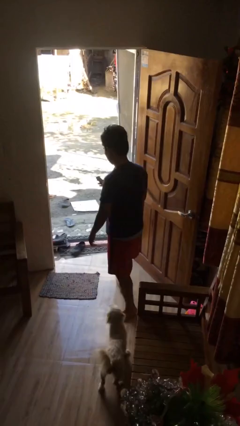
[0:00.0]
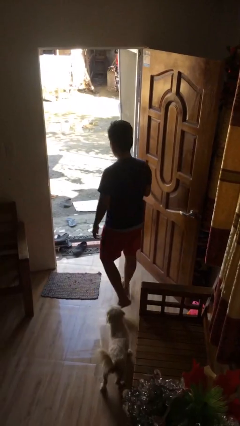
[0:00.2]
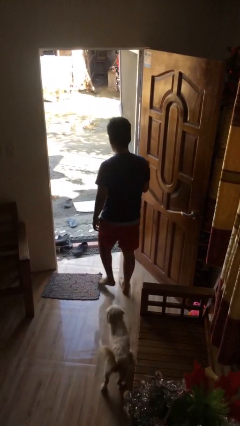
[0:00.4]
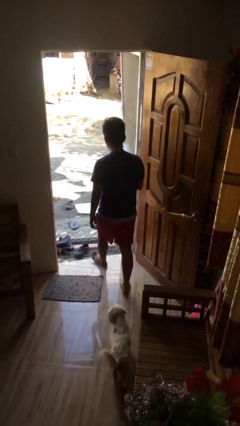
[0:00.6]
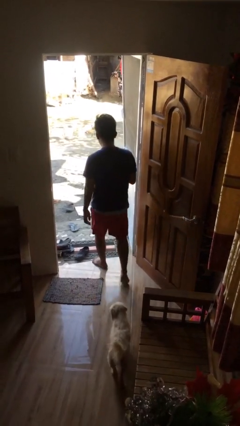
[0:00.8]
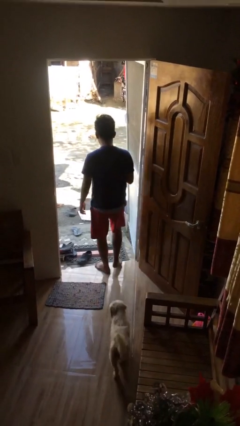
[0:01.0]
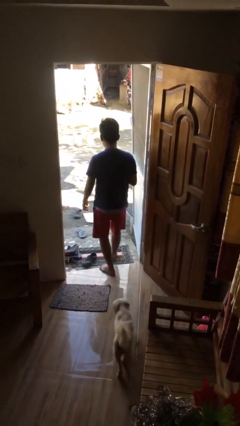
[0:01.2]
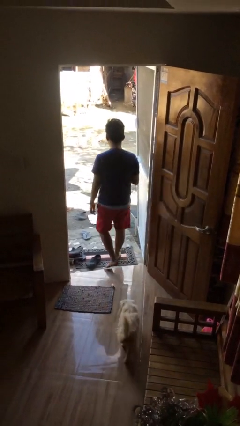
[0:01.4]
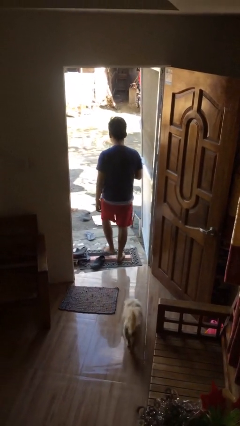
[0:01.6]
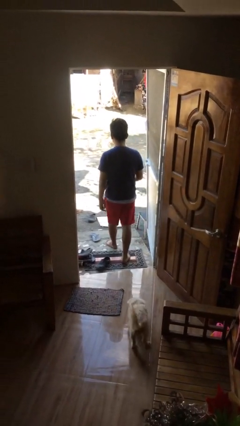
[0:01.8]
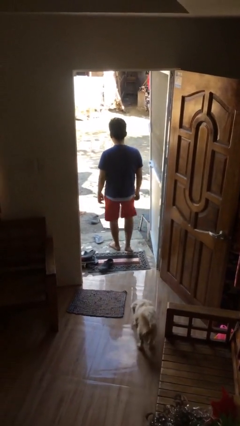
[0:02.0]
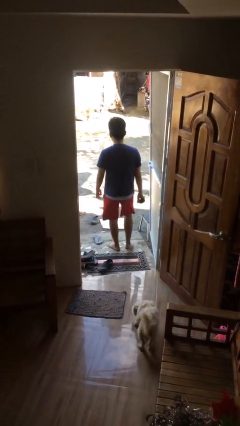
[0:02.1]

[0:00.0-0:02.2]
person exits scene through structure

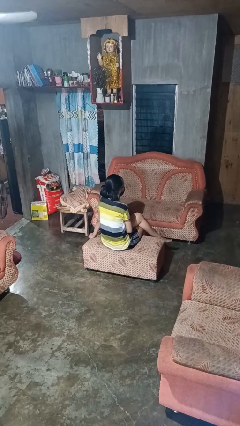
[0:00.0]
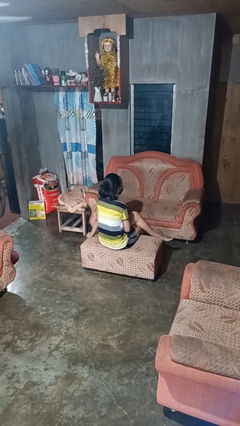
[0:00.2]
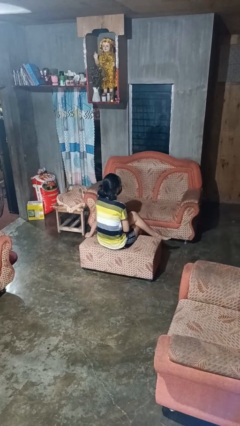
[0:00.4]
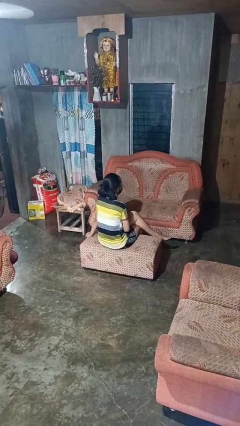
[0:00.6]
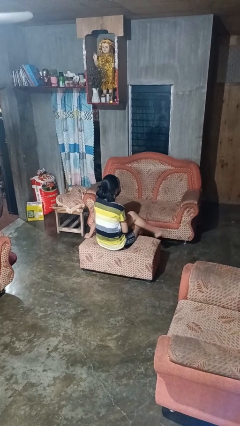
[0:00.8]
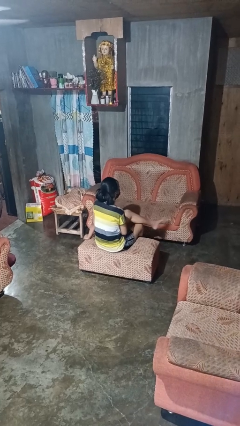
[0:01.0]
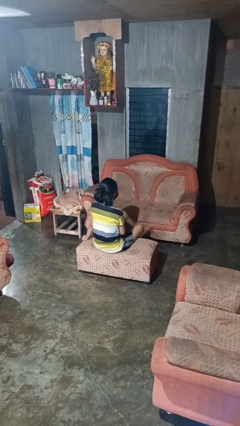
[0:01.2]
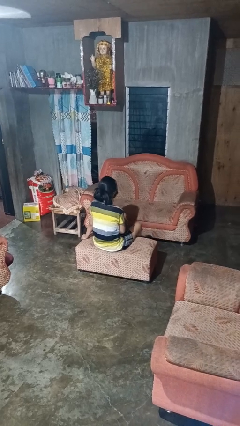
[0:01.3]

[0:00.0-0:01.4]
person crosses legs

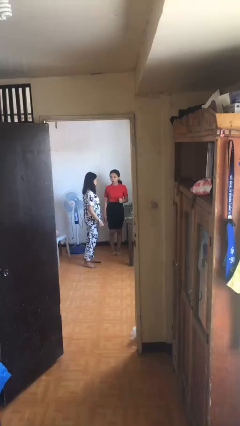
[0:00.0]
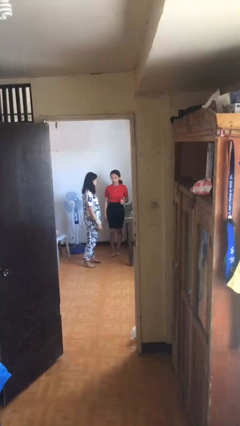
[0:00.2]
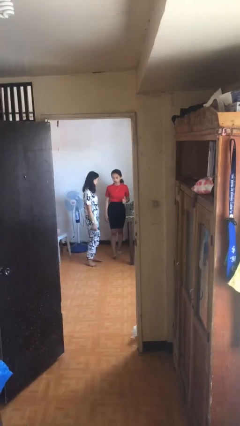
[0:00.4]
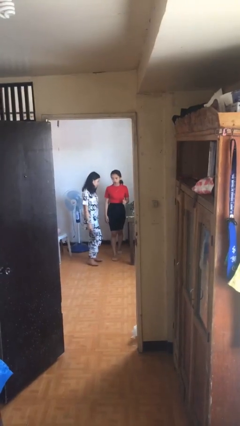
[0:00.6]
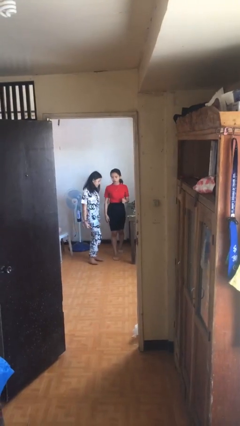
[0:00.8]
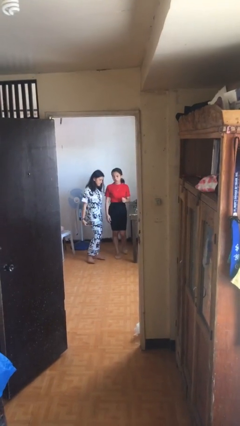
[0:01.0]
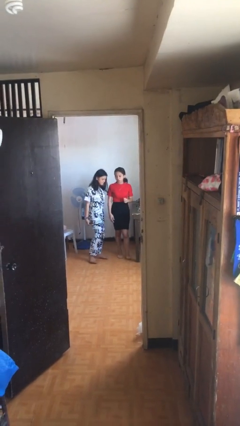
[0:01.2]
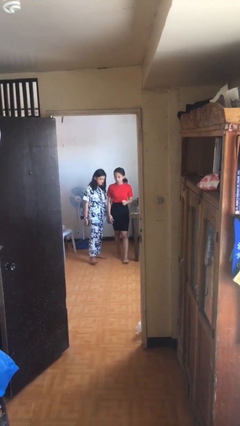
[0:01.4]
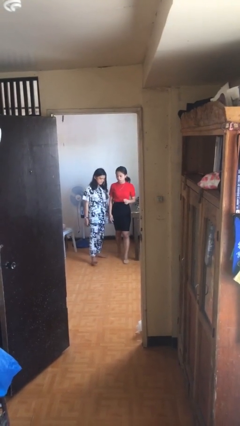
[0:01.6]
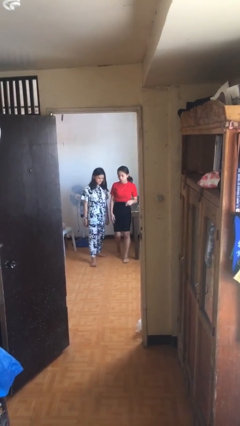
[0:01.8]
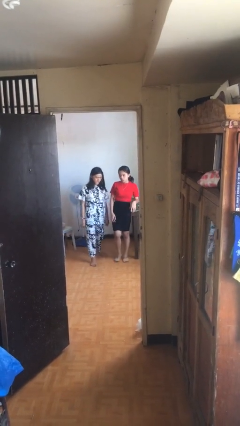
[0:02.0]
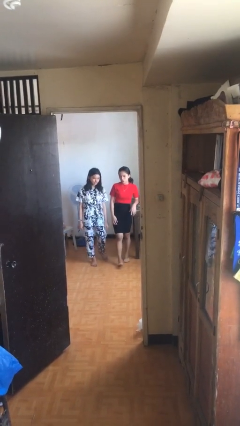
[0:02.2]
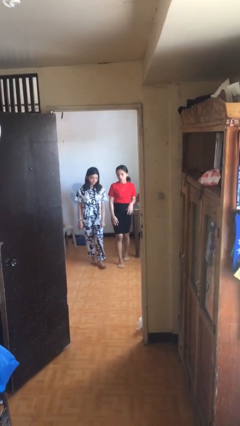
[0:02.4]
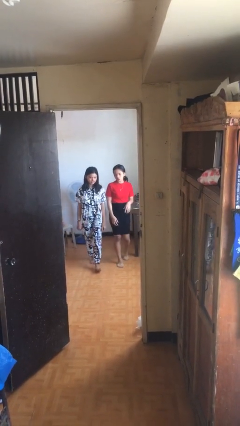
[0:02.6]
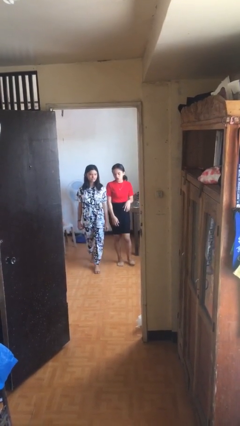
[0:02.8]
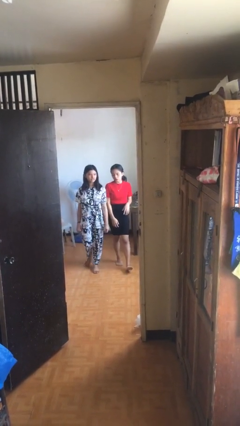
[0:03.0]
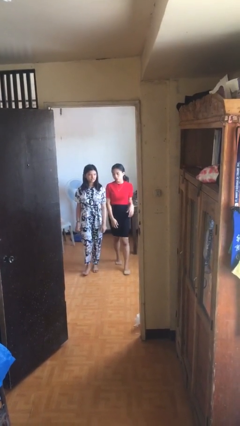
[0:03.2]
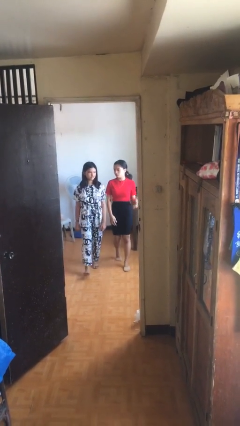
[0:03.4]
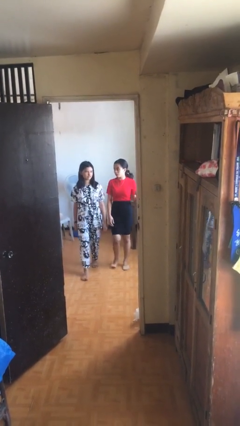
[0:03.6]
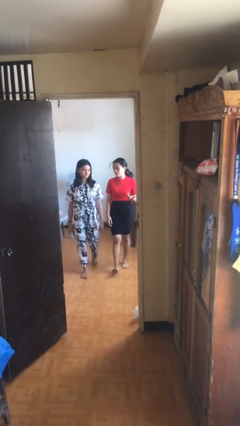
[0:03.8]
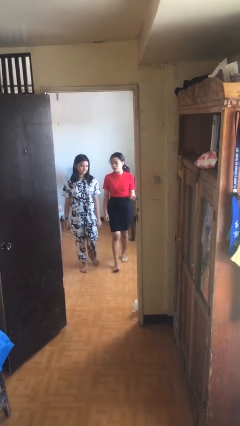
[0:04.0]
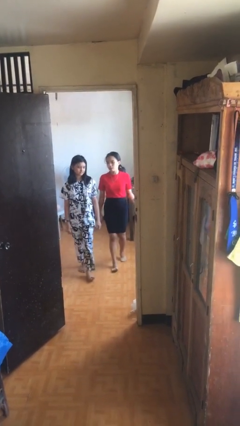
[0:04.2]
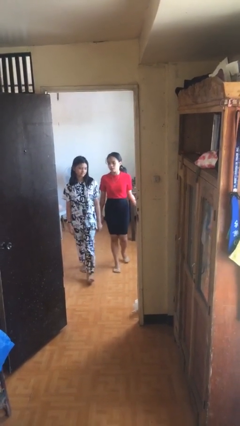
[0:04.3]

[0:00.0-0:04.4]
person talks to person

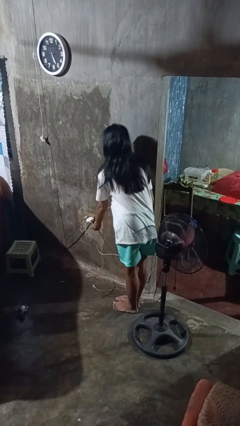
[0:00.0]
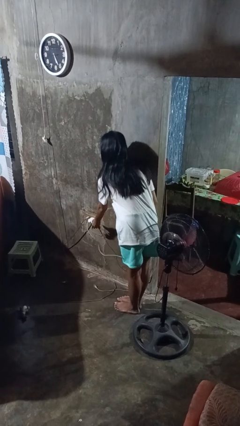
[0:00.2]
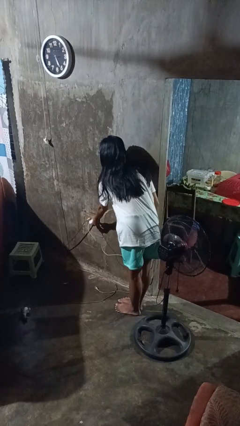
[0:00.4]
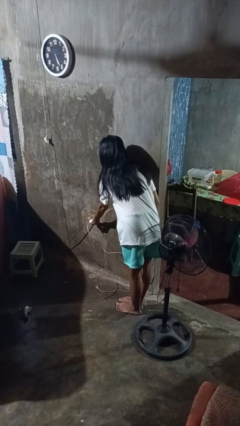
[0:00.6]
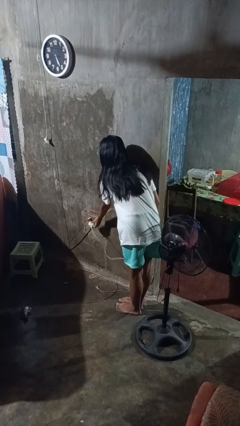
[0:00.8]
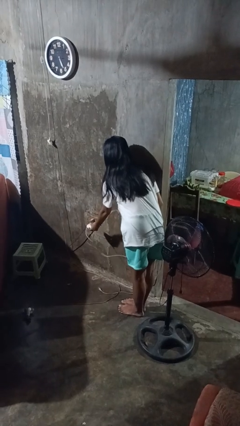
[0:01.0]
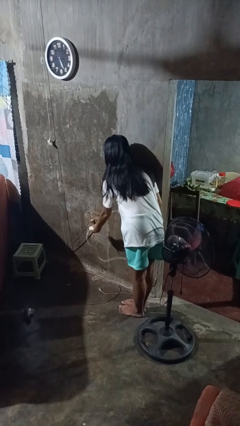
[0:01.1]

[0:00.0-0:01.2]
person unplugs from electrical socket

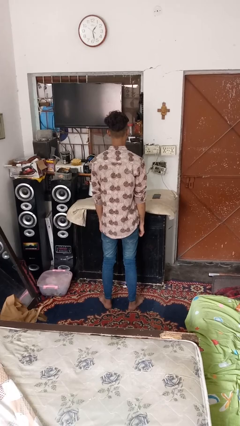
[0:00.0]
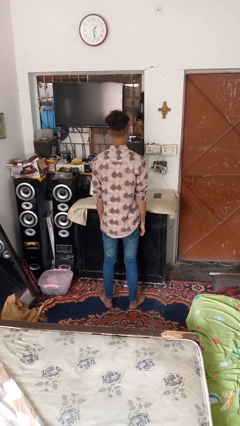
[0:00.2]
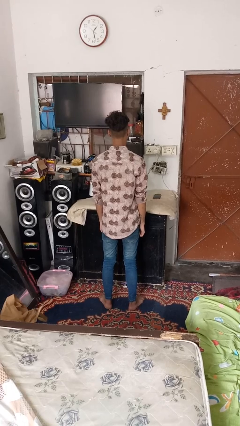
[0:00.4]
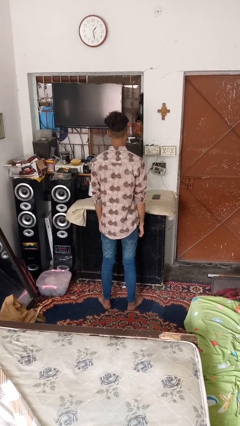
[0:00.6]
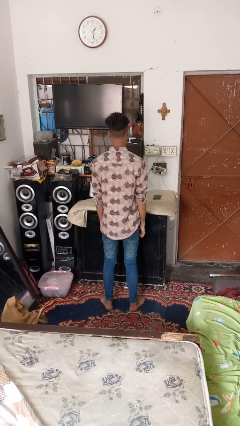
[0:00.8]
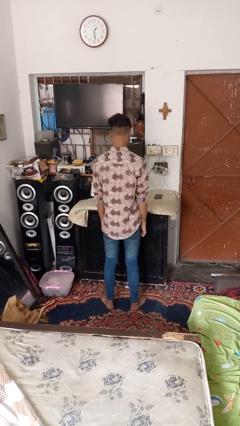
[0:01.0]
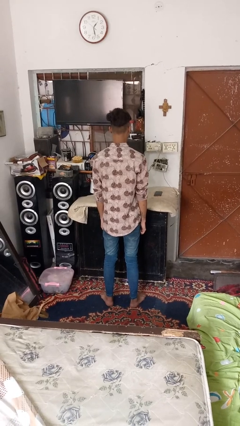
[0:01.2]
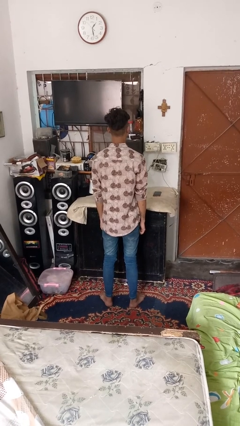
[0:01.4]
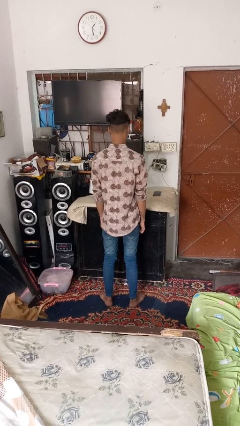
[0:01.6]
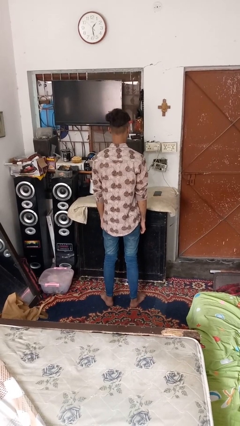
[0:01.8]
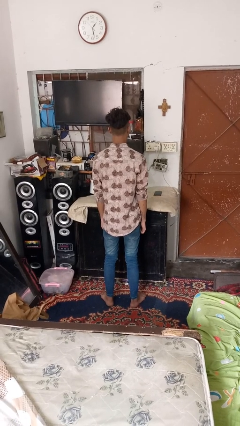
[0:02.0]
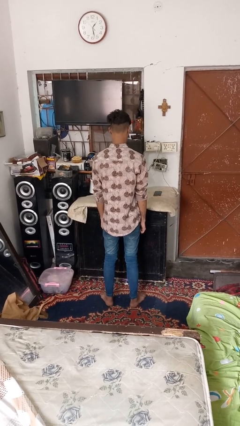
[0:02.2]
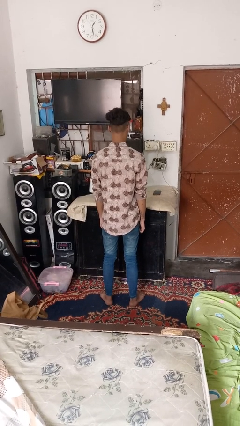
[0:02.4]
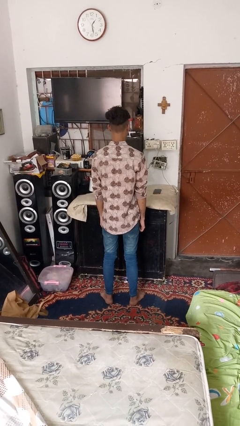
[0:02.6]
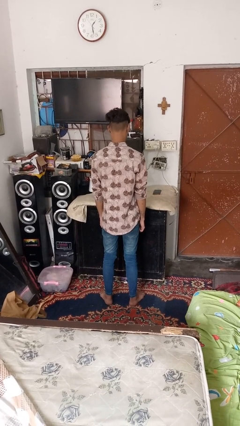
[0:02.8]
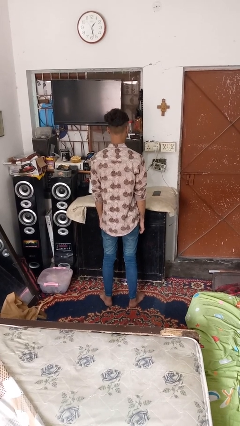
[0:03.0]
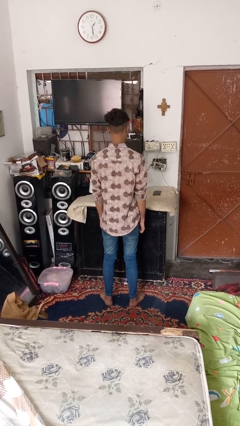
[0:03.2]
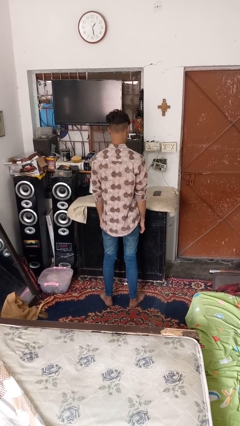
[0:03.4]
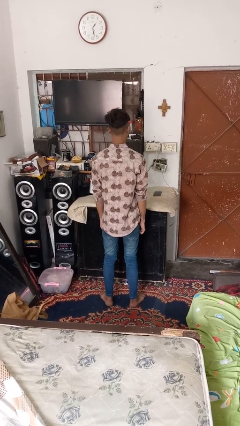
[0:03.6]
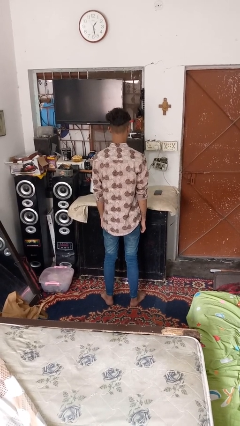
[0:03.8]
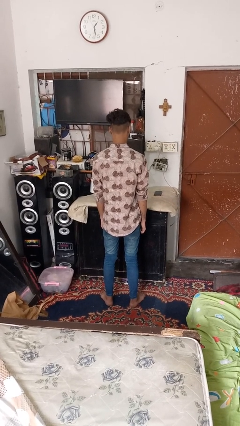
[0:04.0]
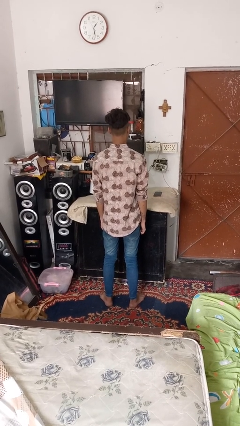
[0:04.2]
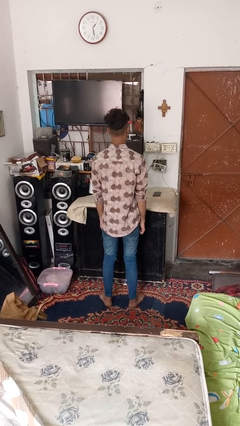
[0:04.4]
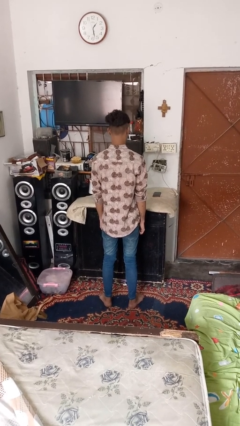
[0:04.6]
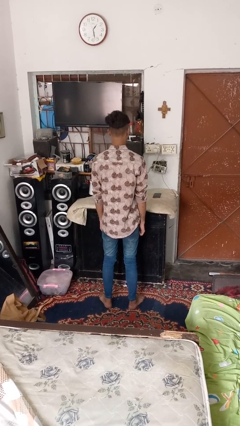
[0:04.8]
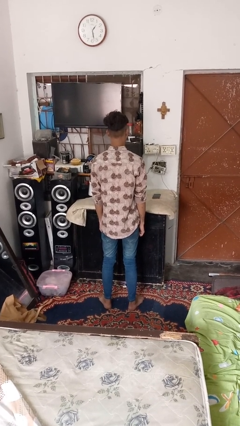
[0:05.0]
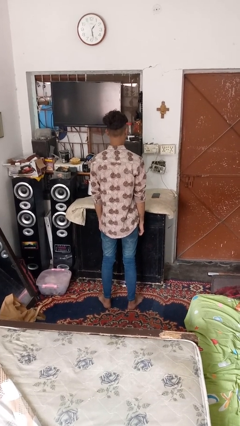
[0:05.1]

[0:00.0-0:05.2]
person nods head

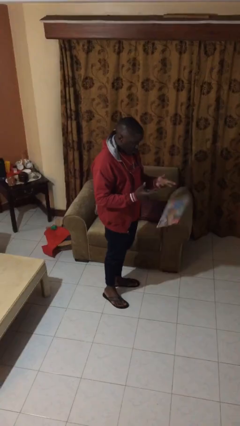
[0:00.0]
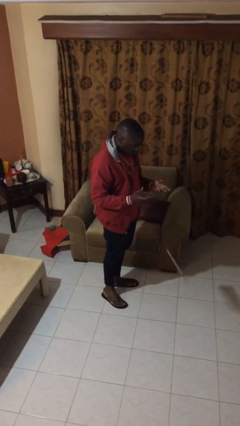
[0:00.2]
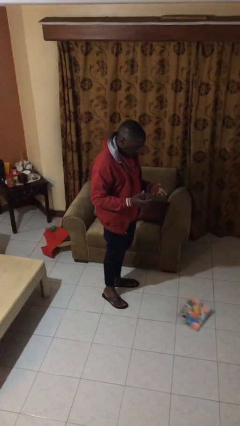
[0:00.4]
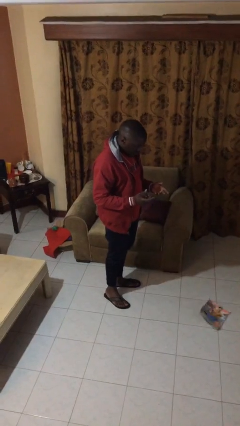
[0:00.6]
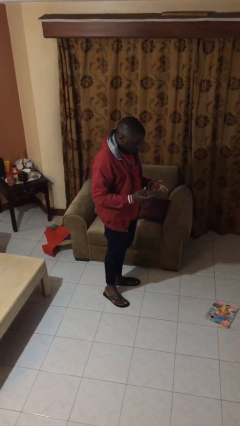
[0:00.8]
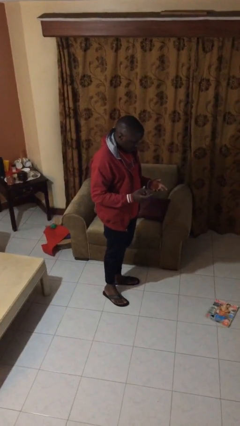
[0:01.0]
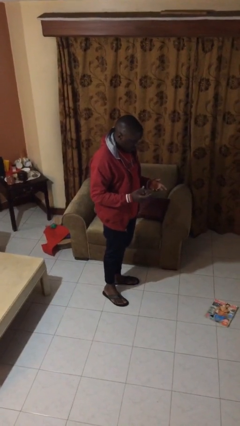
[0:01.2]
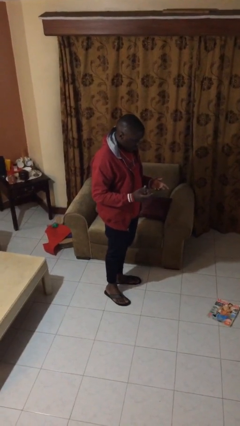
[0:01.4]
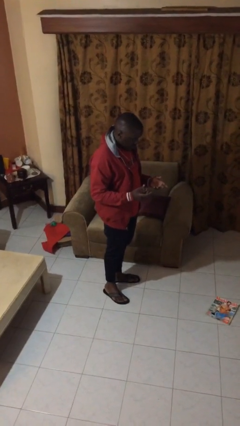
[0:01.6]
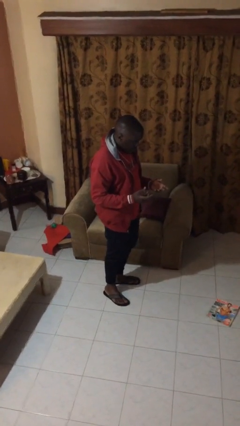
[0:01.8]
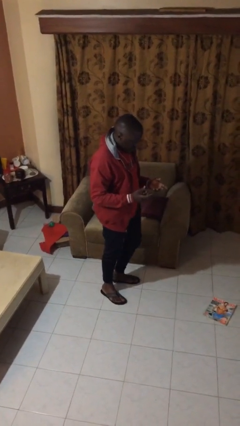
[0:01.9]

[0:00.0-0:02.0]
person drops object

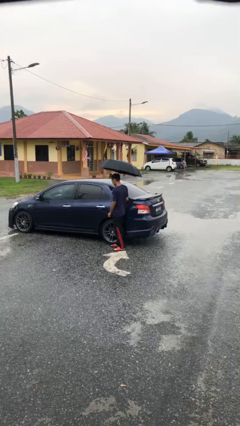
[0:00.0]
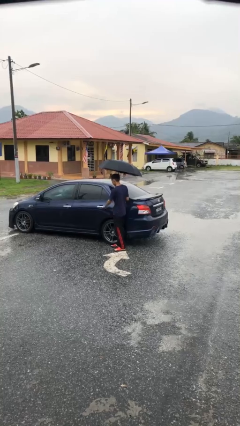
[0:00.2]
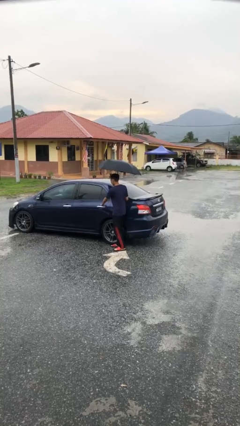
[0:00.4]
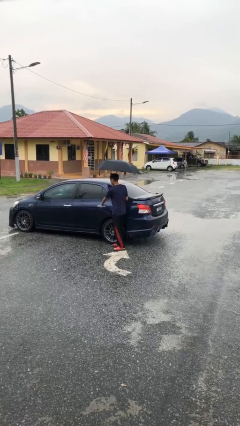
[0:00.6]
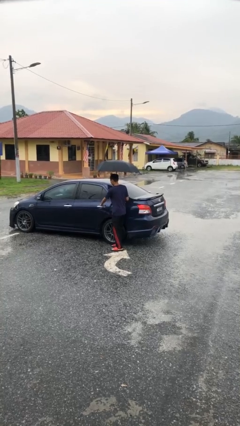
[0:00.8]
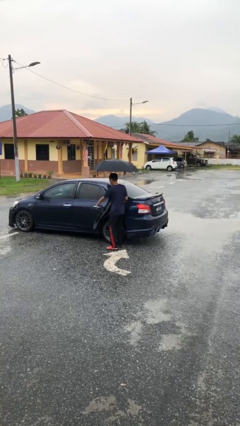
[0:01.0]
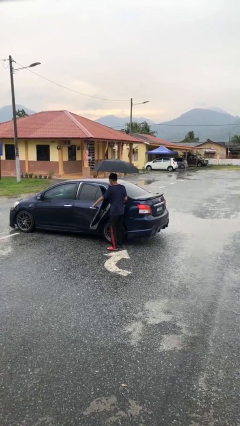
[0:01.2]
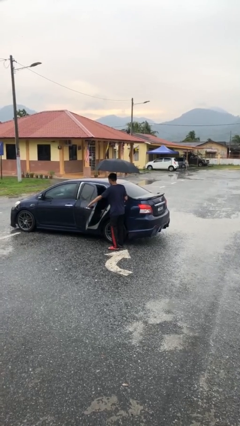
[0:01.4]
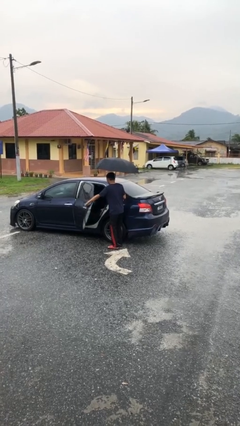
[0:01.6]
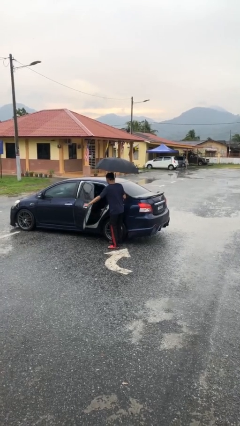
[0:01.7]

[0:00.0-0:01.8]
person opens car door
